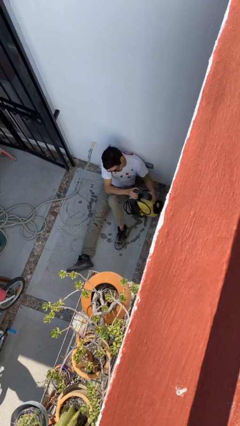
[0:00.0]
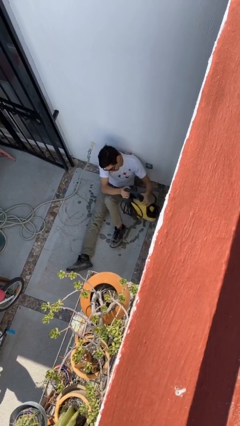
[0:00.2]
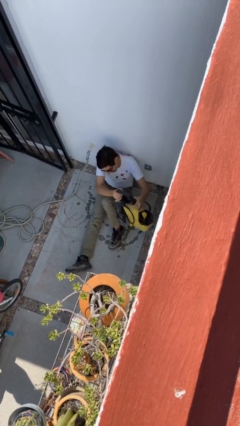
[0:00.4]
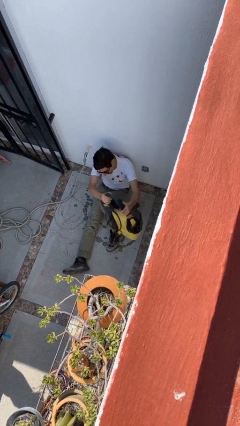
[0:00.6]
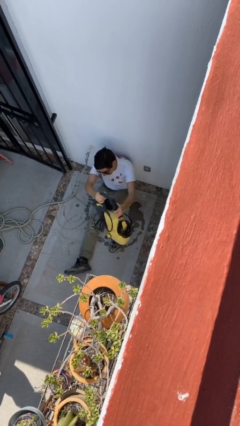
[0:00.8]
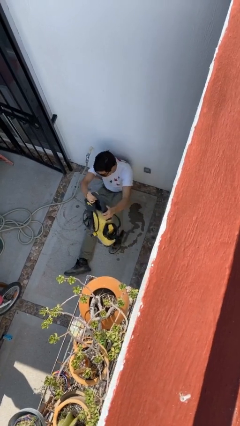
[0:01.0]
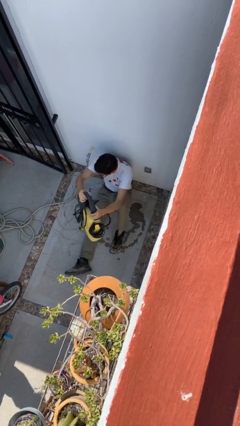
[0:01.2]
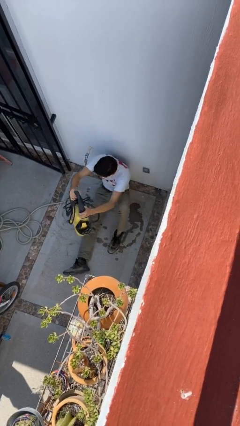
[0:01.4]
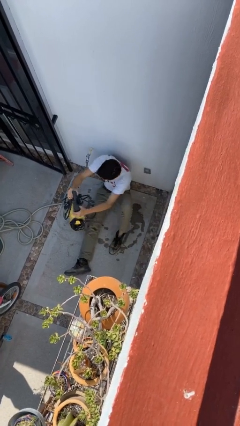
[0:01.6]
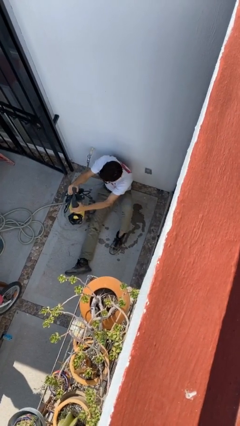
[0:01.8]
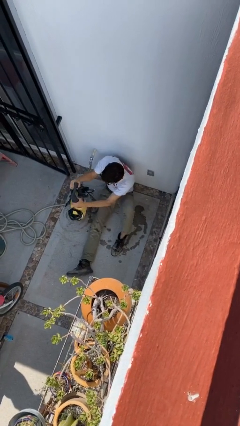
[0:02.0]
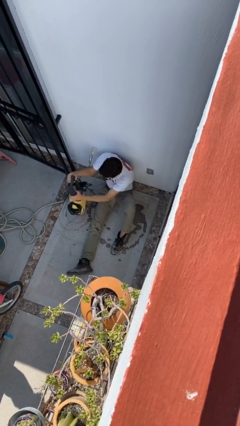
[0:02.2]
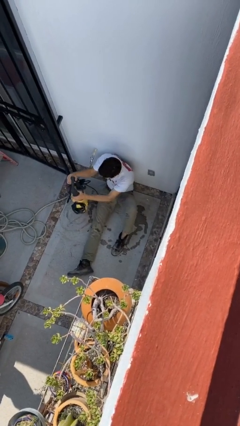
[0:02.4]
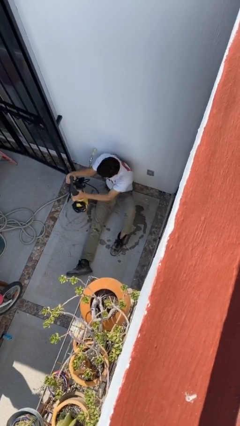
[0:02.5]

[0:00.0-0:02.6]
person picks up object from floor

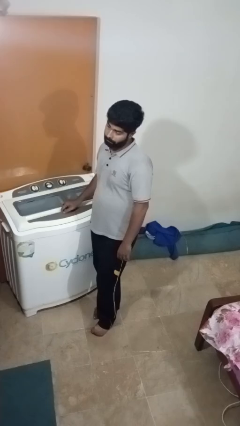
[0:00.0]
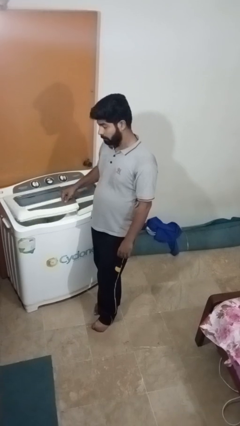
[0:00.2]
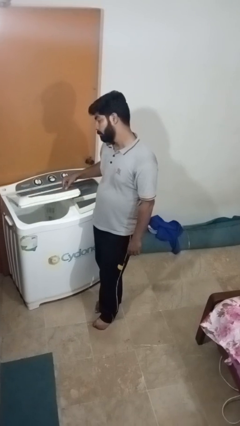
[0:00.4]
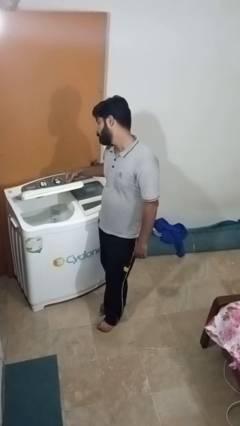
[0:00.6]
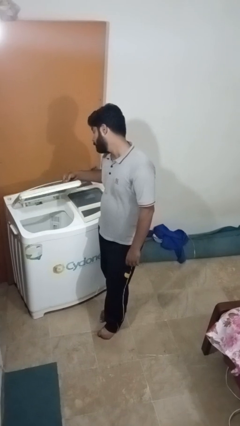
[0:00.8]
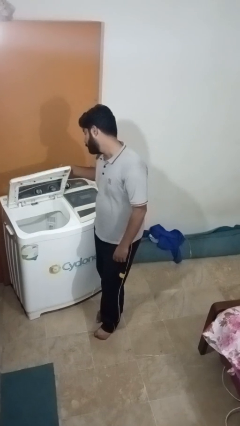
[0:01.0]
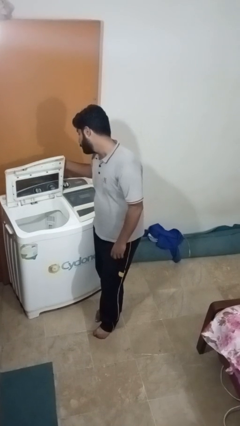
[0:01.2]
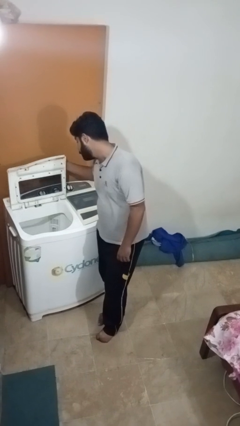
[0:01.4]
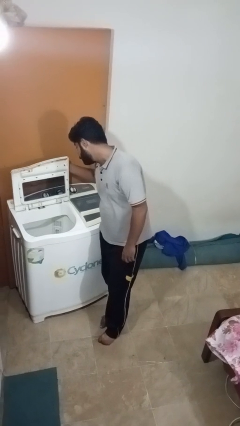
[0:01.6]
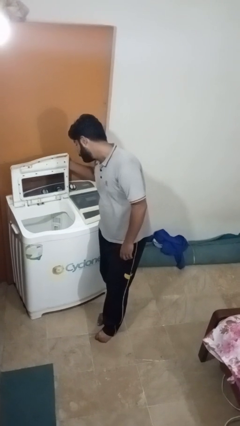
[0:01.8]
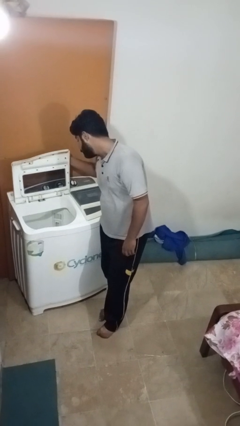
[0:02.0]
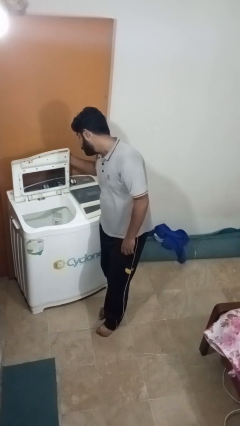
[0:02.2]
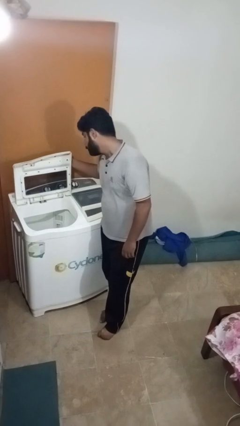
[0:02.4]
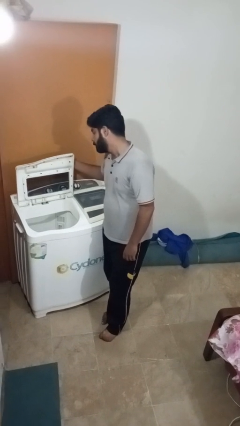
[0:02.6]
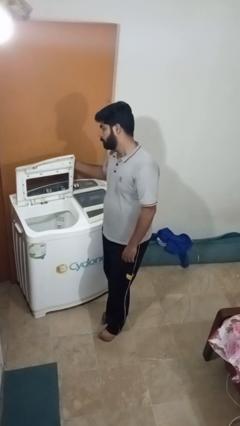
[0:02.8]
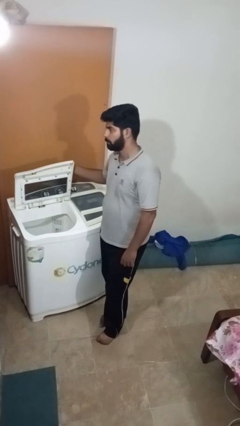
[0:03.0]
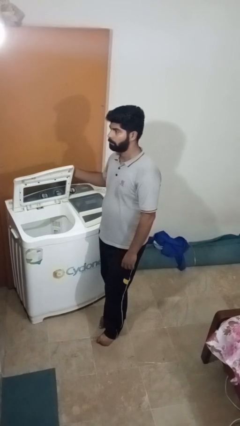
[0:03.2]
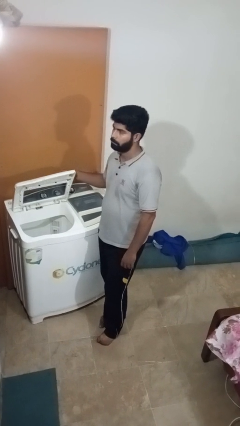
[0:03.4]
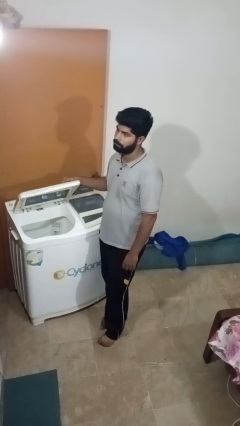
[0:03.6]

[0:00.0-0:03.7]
person opens clothes washer

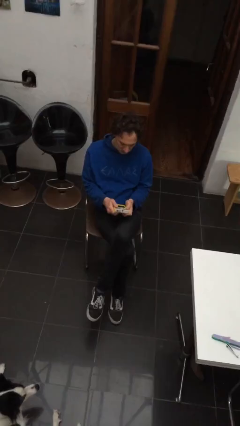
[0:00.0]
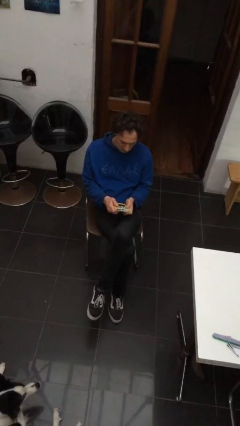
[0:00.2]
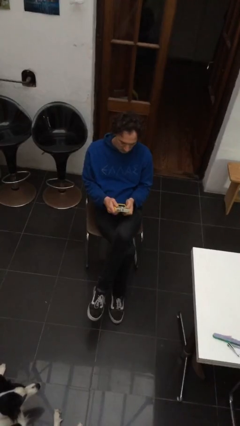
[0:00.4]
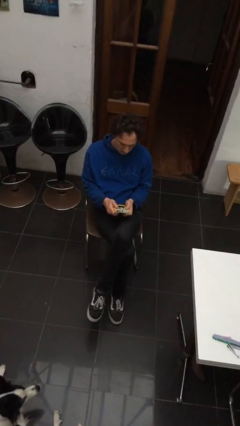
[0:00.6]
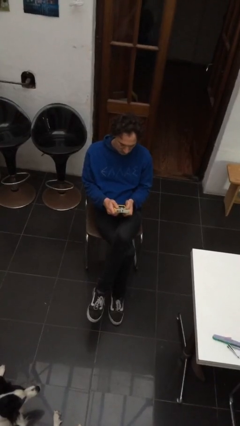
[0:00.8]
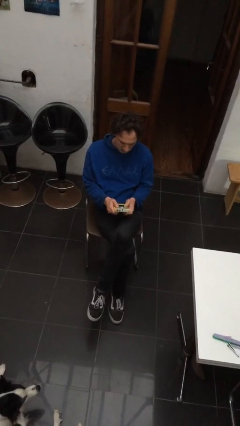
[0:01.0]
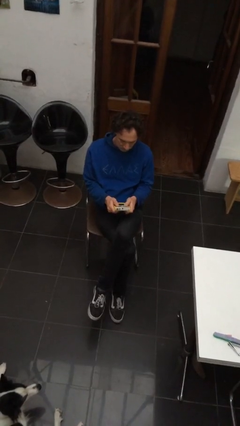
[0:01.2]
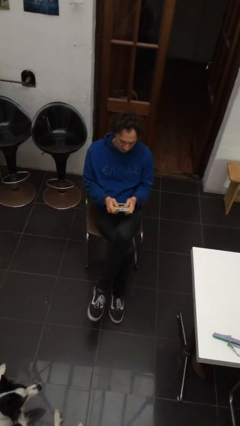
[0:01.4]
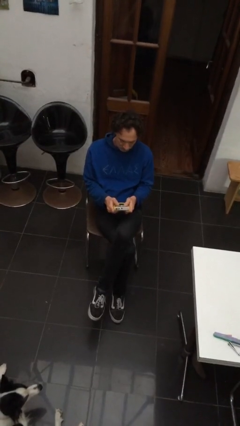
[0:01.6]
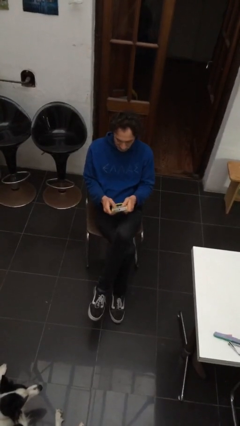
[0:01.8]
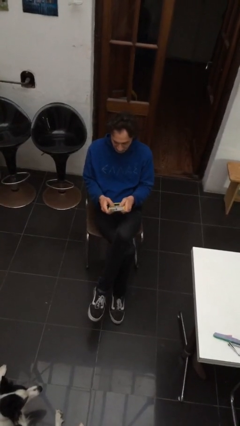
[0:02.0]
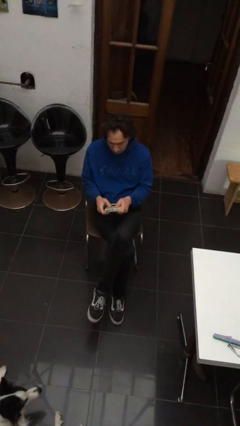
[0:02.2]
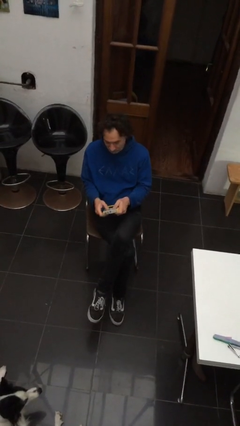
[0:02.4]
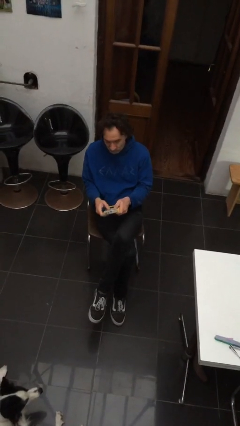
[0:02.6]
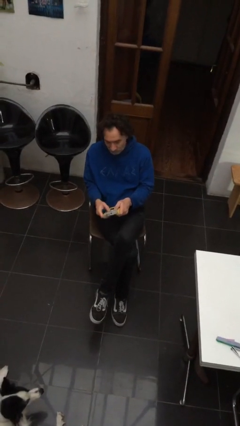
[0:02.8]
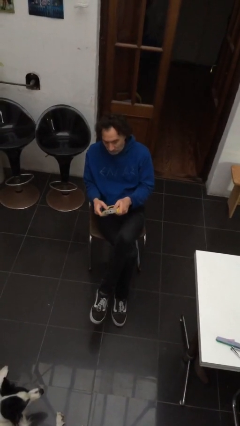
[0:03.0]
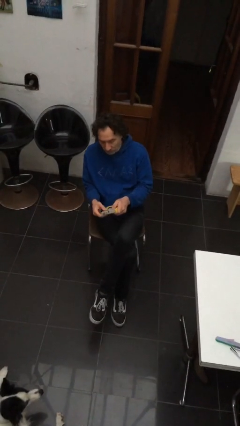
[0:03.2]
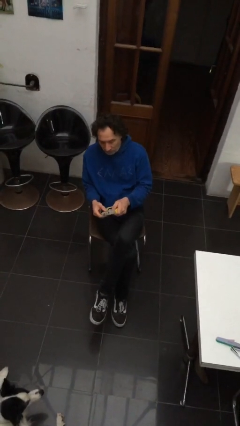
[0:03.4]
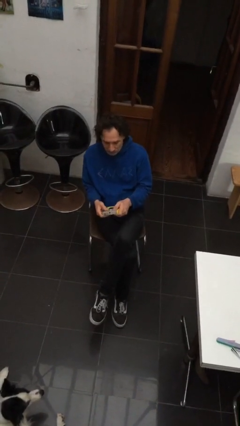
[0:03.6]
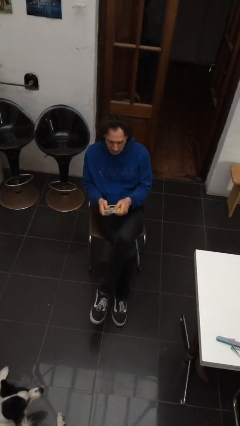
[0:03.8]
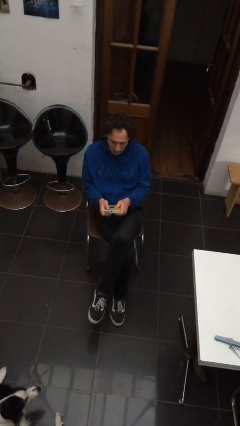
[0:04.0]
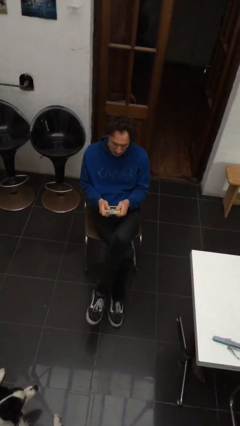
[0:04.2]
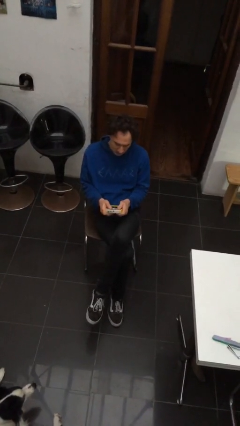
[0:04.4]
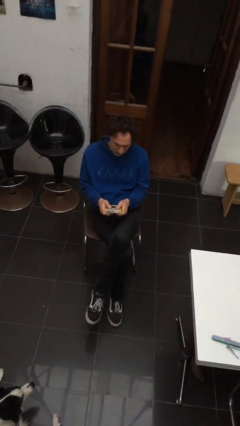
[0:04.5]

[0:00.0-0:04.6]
person interacts with handheld game

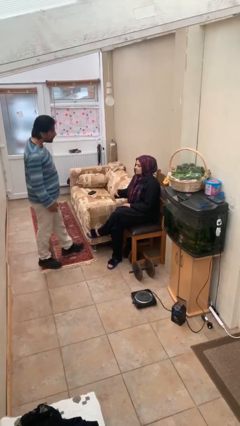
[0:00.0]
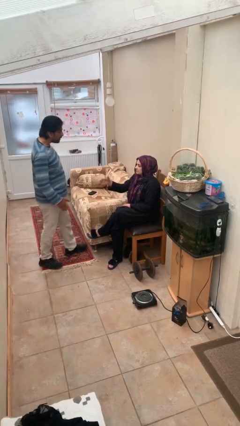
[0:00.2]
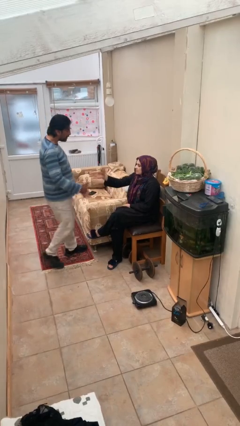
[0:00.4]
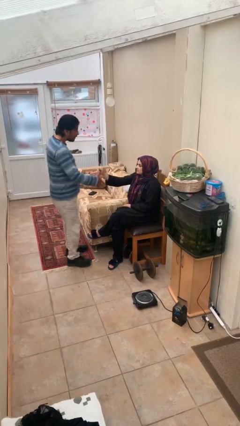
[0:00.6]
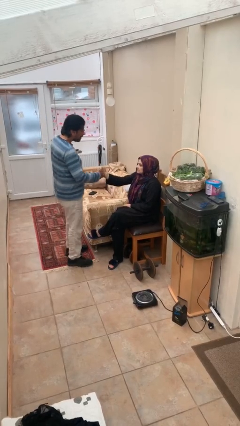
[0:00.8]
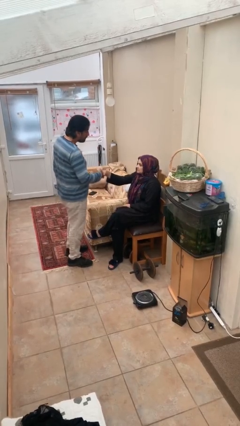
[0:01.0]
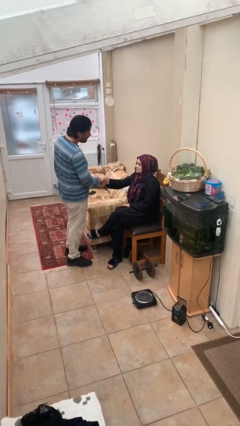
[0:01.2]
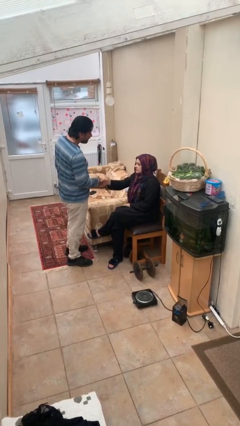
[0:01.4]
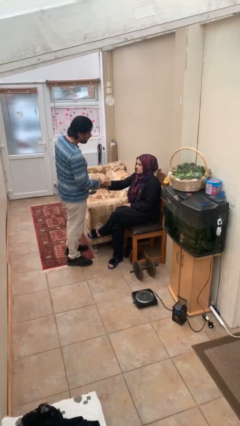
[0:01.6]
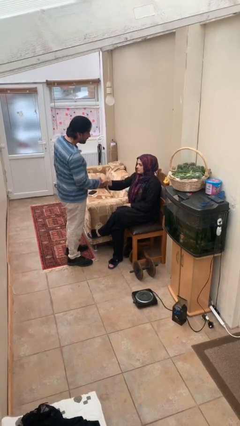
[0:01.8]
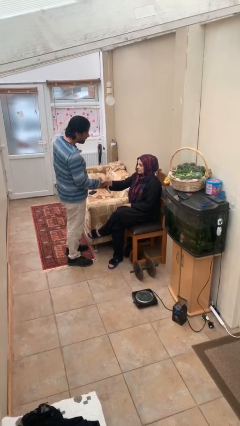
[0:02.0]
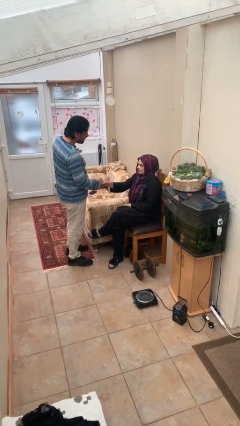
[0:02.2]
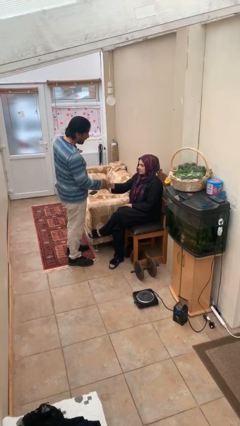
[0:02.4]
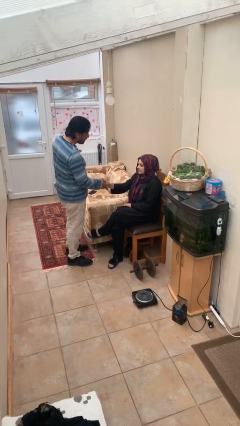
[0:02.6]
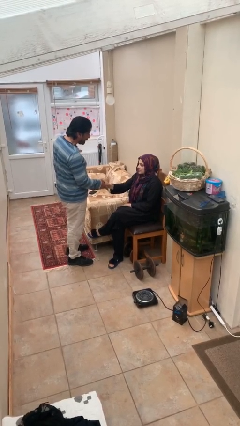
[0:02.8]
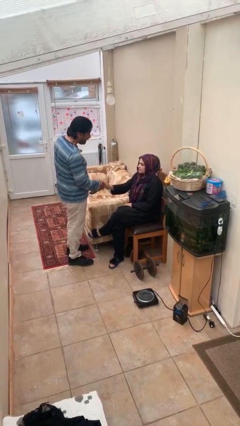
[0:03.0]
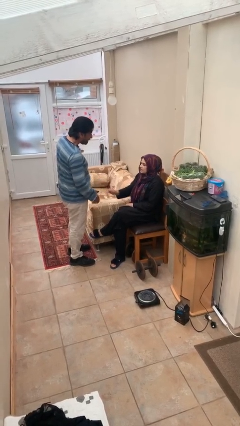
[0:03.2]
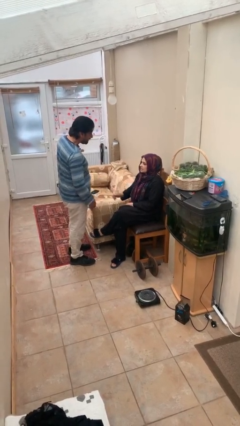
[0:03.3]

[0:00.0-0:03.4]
person shakes hand

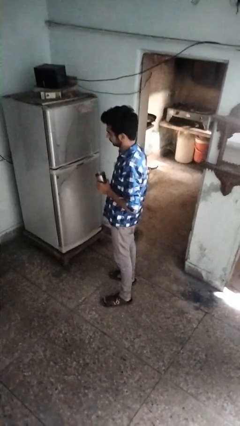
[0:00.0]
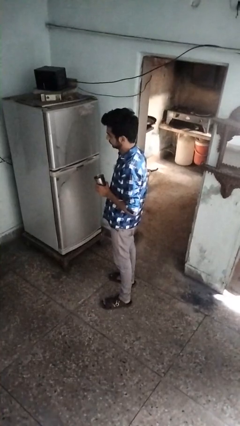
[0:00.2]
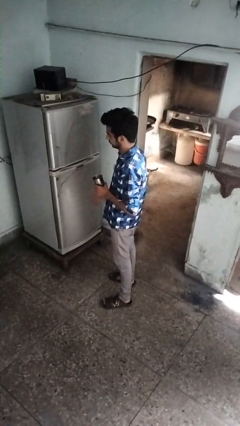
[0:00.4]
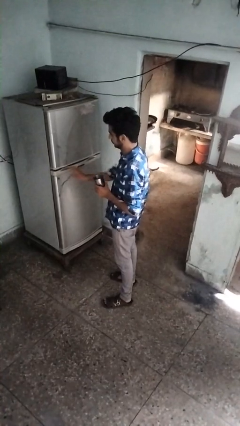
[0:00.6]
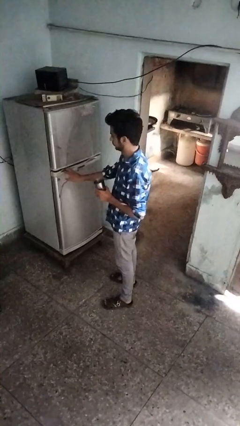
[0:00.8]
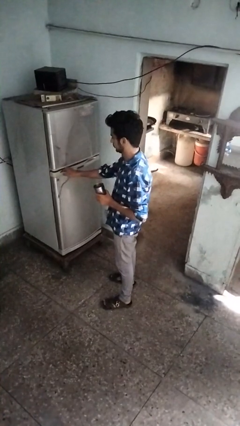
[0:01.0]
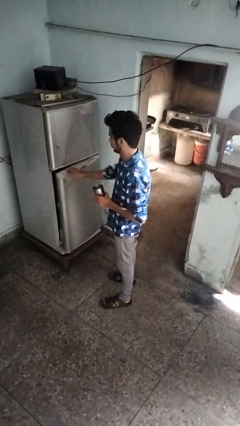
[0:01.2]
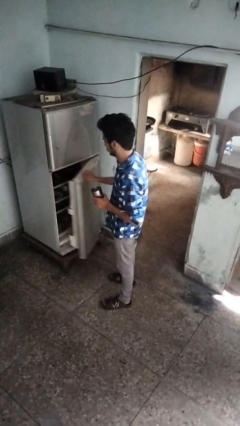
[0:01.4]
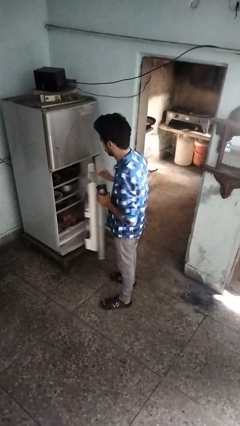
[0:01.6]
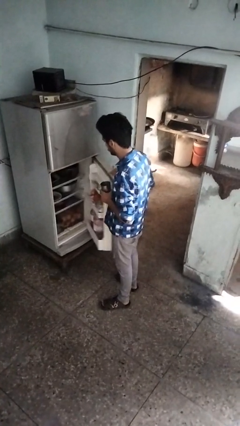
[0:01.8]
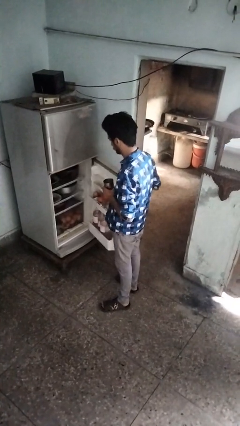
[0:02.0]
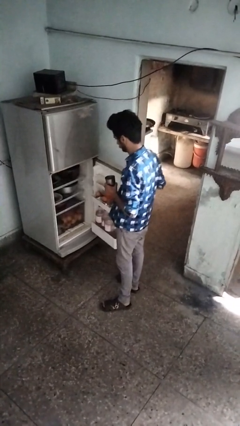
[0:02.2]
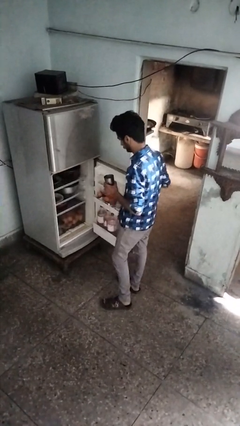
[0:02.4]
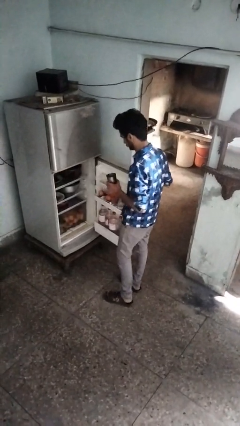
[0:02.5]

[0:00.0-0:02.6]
person opens refrigerator

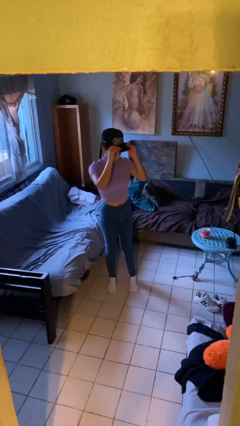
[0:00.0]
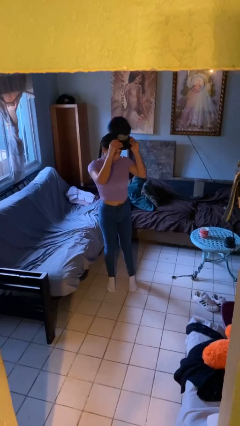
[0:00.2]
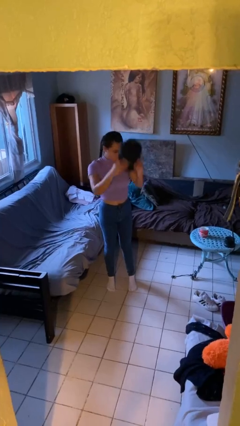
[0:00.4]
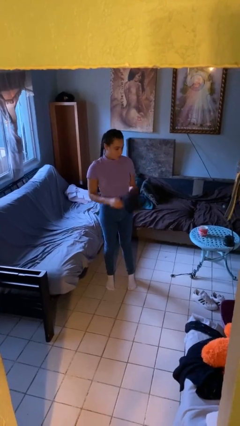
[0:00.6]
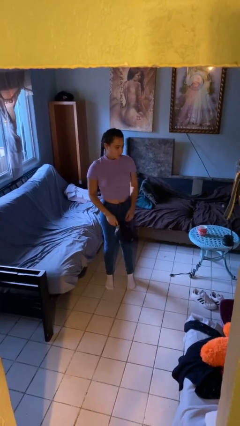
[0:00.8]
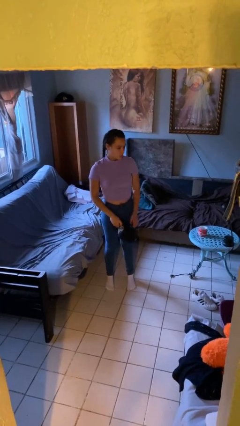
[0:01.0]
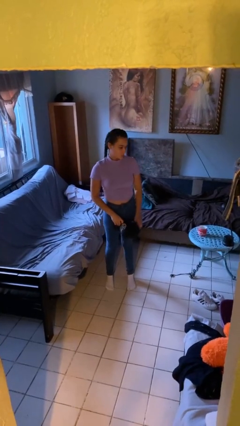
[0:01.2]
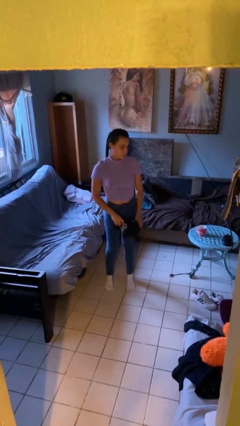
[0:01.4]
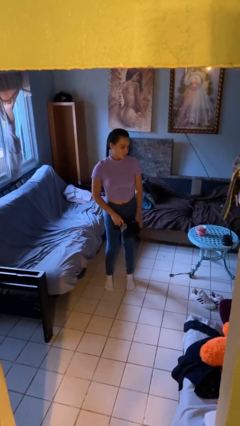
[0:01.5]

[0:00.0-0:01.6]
person takes off hat
